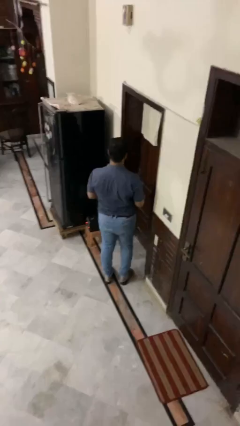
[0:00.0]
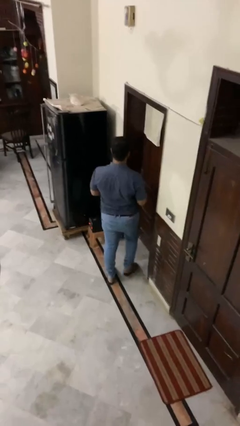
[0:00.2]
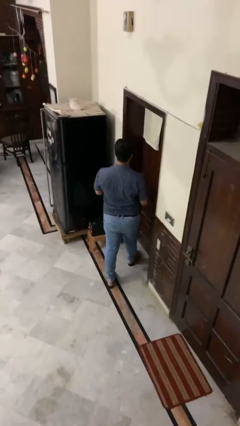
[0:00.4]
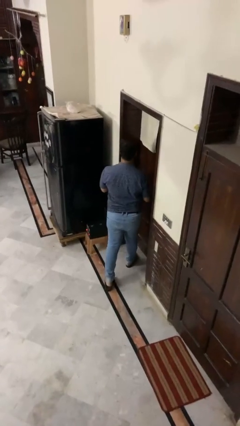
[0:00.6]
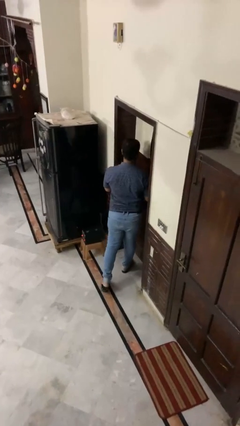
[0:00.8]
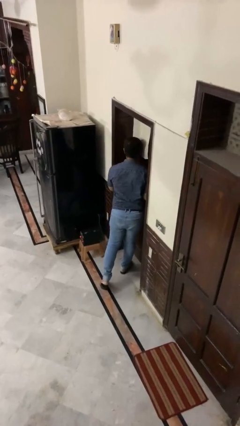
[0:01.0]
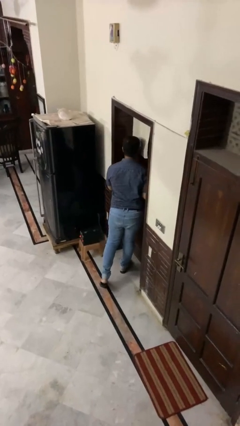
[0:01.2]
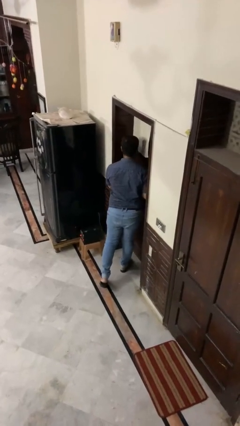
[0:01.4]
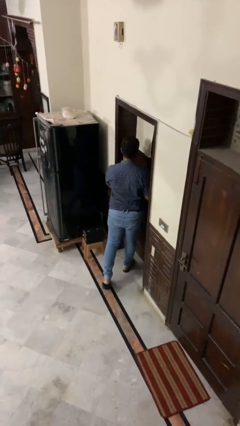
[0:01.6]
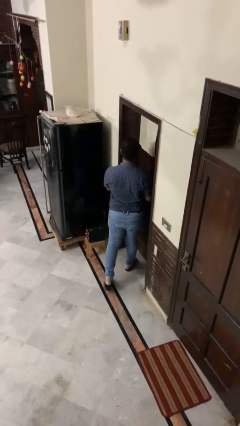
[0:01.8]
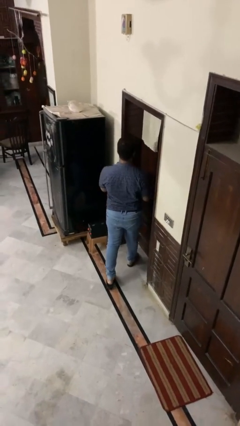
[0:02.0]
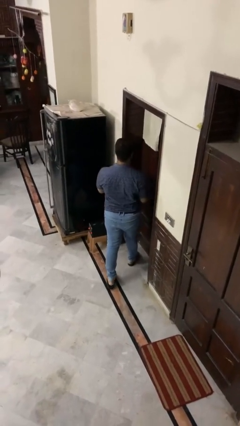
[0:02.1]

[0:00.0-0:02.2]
person bumps into wall

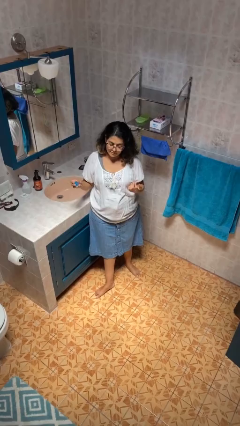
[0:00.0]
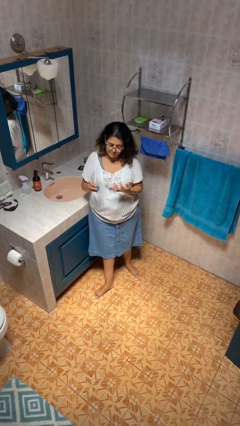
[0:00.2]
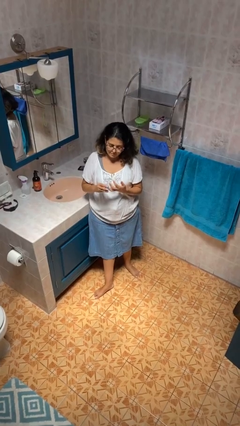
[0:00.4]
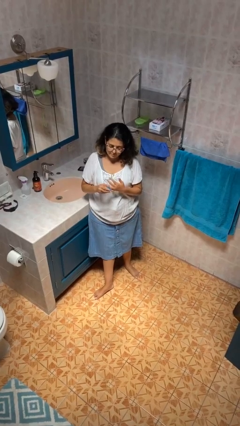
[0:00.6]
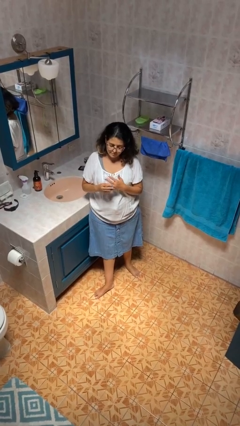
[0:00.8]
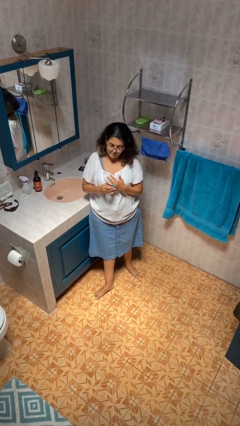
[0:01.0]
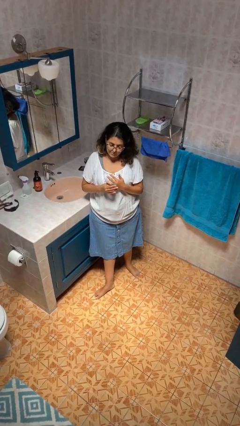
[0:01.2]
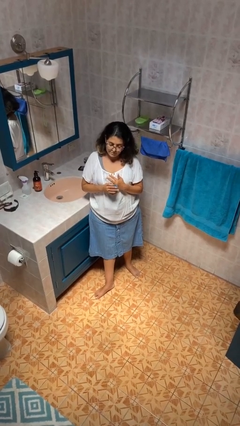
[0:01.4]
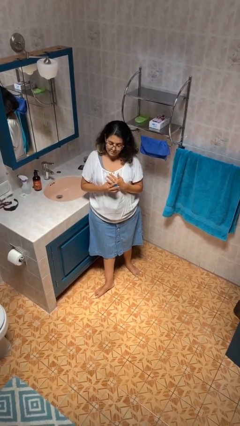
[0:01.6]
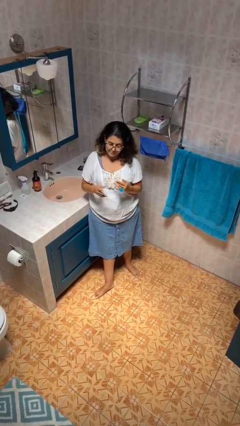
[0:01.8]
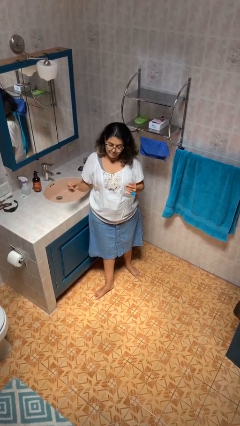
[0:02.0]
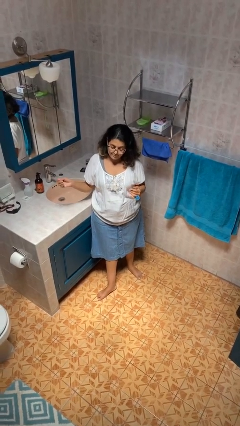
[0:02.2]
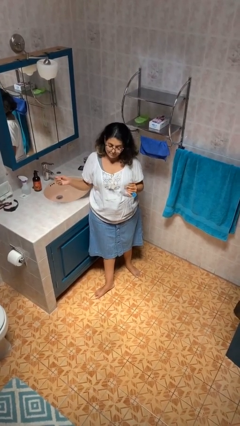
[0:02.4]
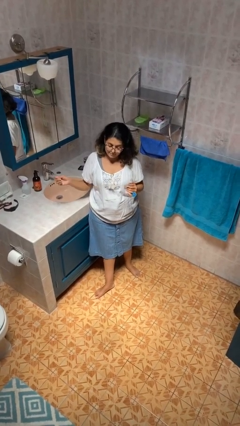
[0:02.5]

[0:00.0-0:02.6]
person puts on ring

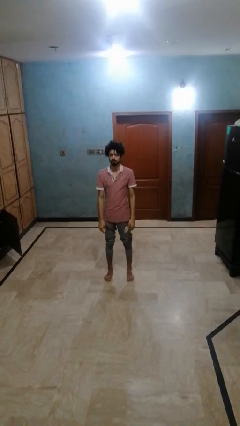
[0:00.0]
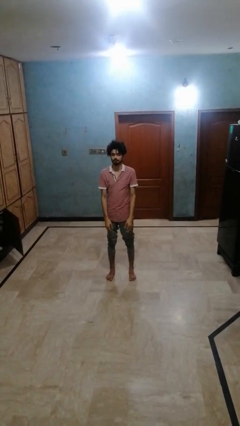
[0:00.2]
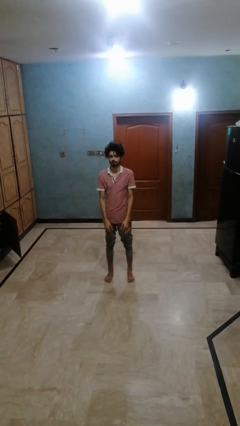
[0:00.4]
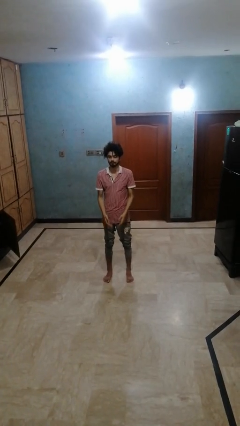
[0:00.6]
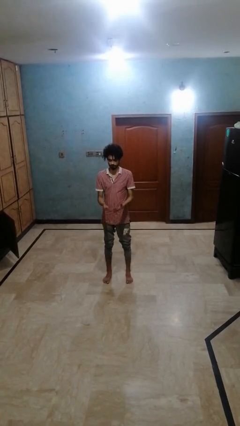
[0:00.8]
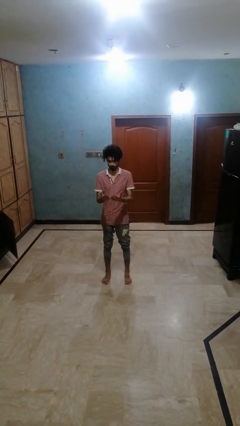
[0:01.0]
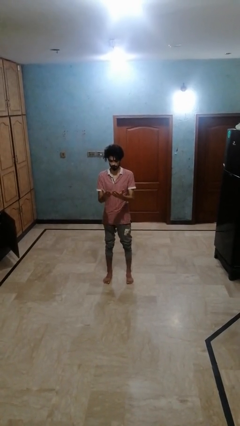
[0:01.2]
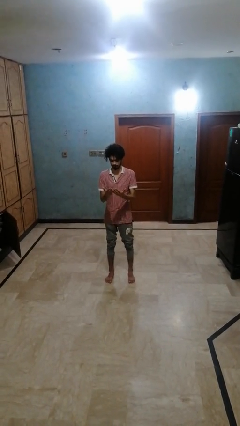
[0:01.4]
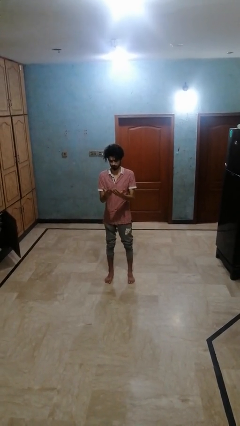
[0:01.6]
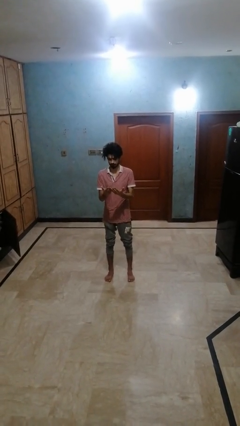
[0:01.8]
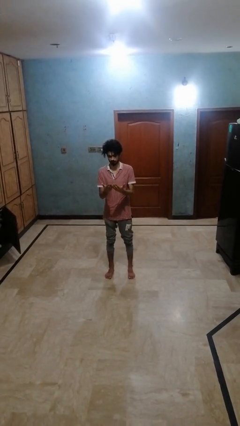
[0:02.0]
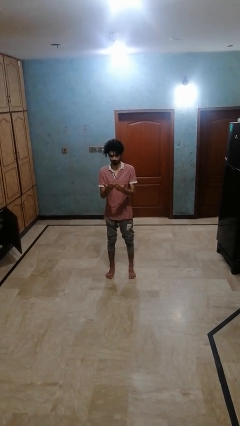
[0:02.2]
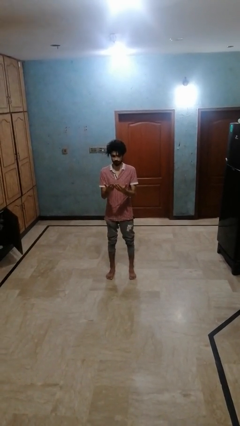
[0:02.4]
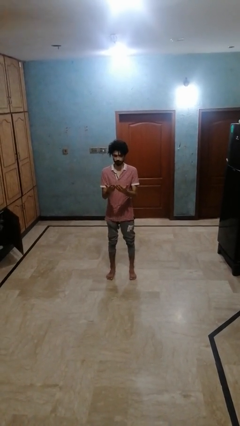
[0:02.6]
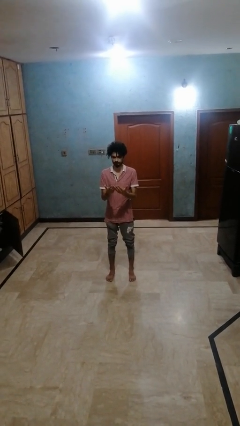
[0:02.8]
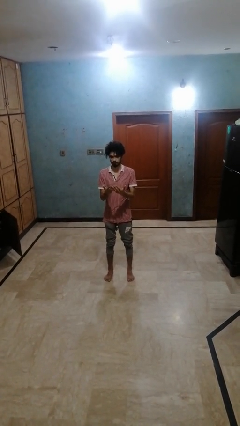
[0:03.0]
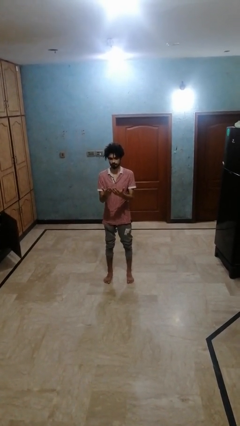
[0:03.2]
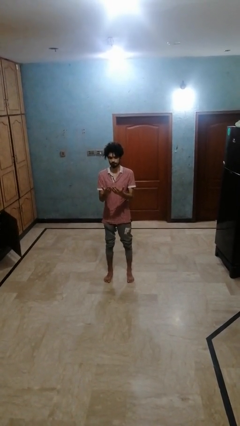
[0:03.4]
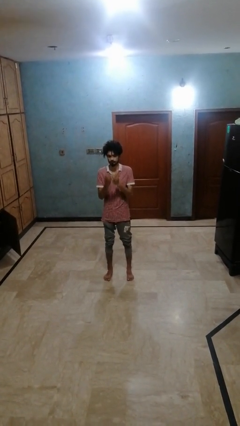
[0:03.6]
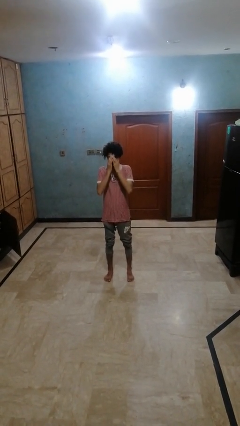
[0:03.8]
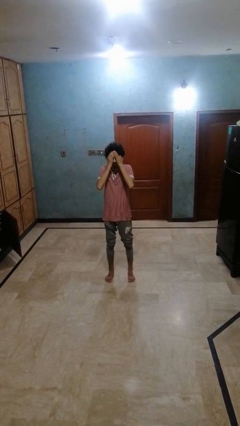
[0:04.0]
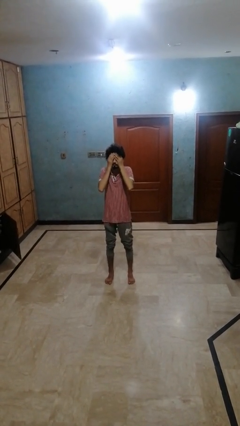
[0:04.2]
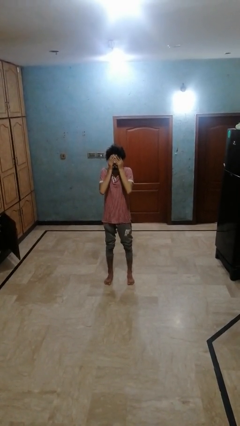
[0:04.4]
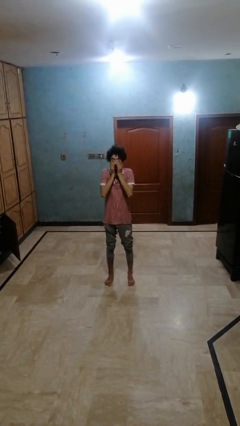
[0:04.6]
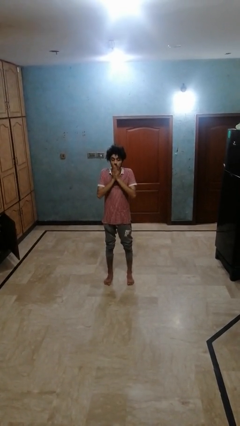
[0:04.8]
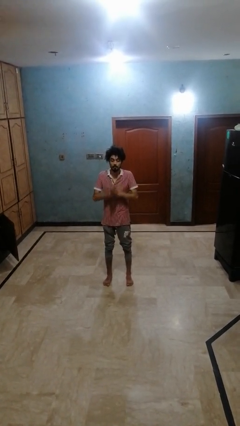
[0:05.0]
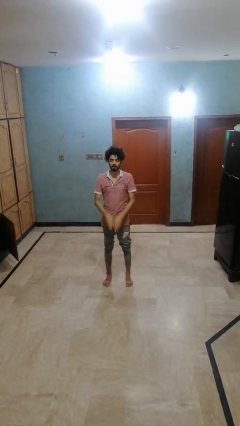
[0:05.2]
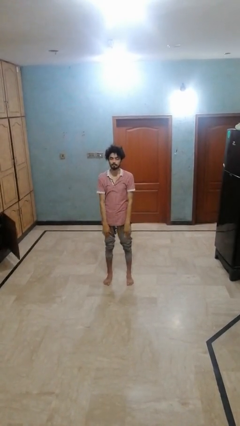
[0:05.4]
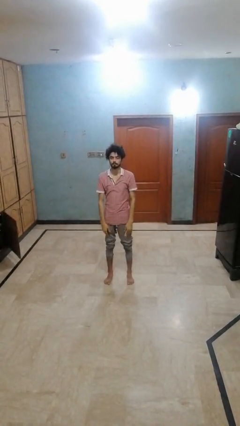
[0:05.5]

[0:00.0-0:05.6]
person prays

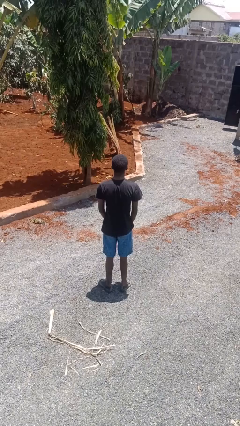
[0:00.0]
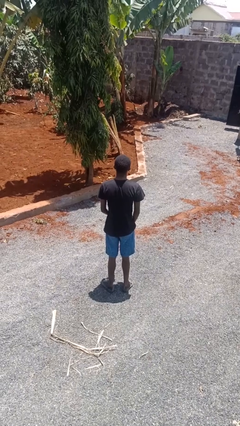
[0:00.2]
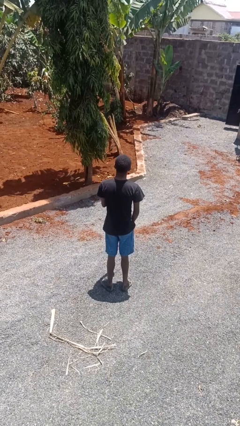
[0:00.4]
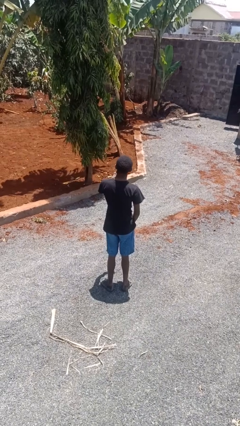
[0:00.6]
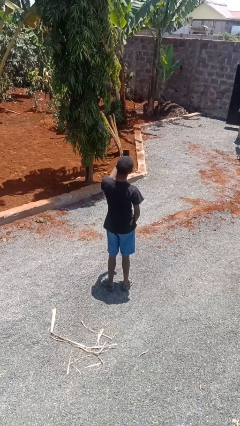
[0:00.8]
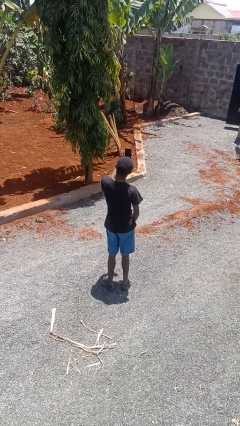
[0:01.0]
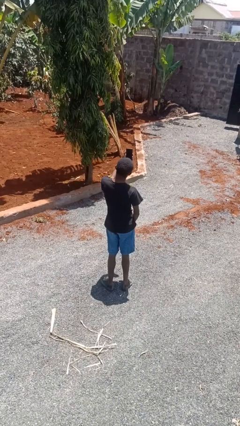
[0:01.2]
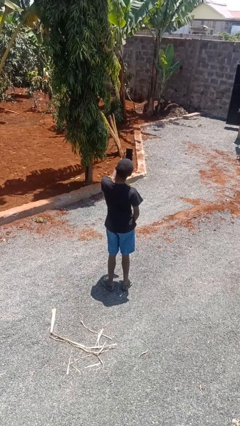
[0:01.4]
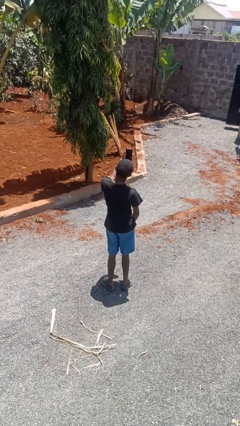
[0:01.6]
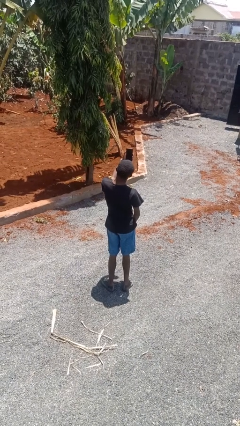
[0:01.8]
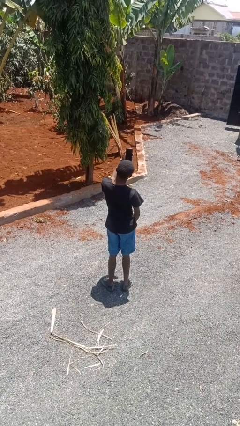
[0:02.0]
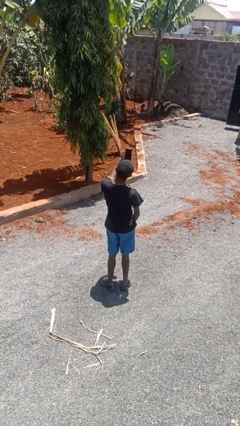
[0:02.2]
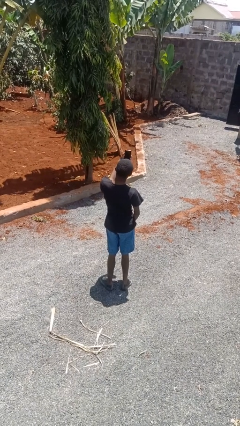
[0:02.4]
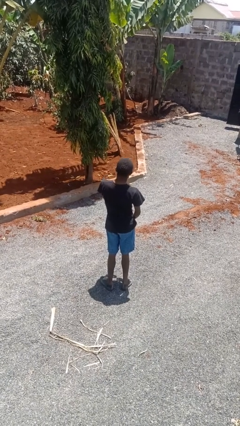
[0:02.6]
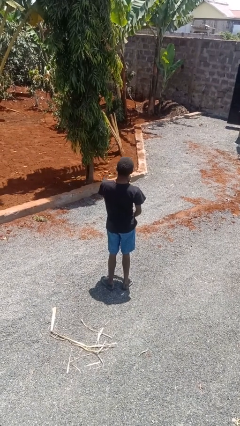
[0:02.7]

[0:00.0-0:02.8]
person takes selfie

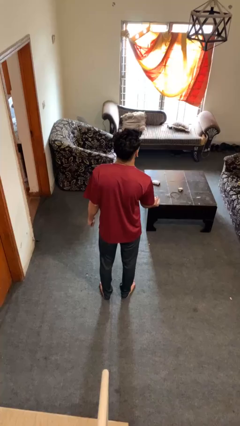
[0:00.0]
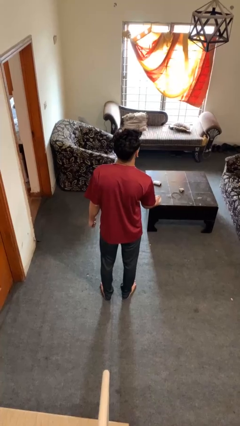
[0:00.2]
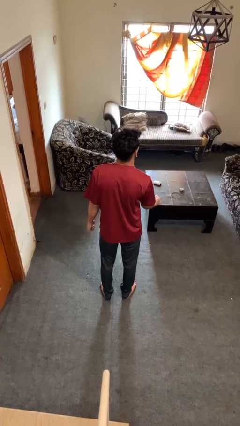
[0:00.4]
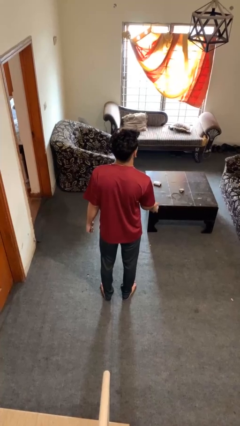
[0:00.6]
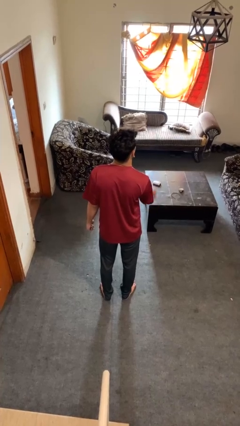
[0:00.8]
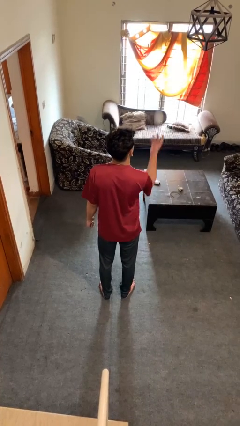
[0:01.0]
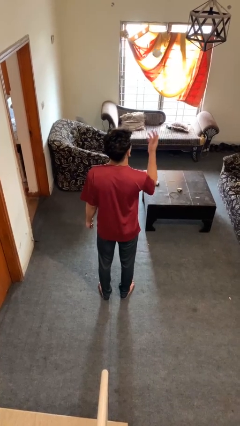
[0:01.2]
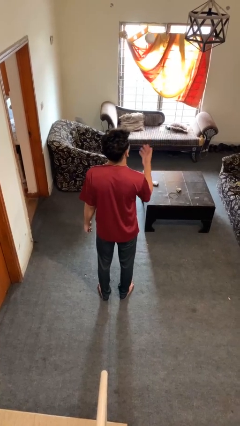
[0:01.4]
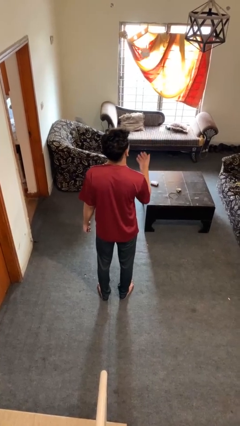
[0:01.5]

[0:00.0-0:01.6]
person drops object

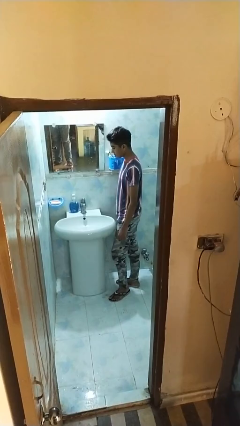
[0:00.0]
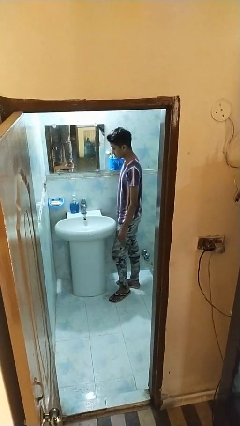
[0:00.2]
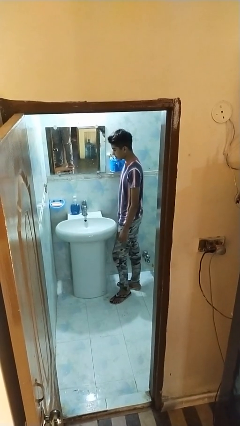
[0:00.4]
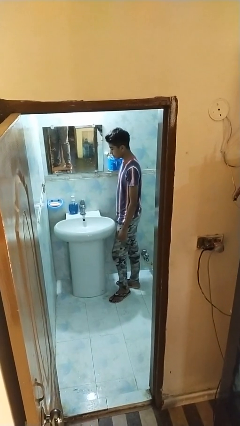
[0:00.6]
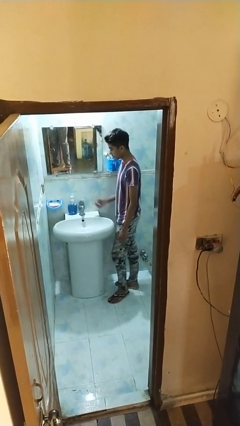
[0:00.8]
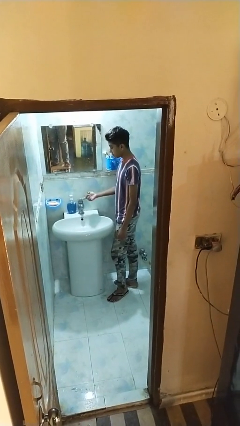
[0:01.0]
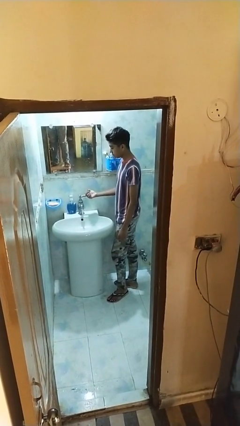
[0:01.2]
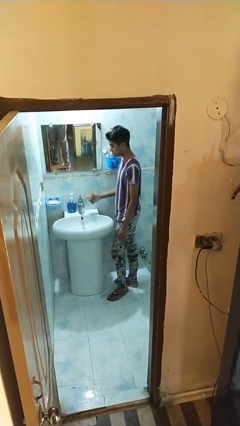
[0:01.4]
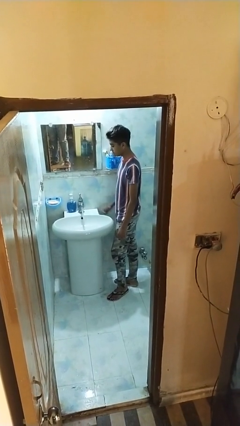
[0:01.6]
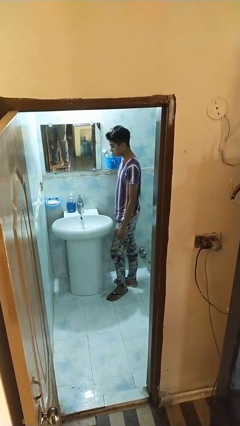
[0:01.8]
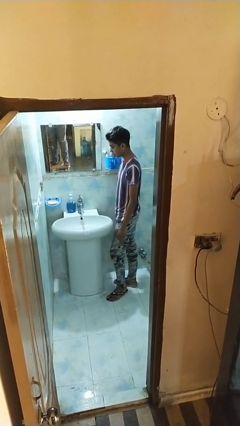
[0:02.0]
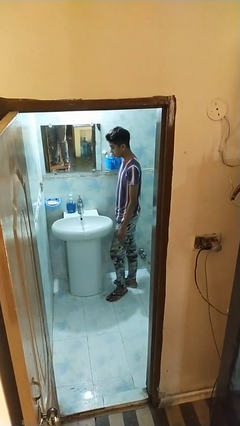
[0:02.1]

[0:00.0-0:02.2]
person turns on faucet

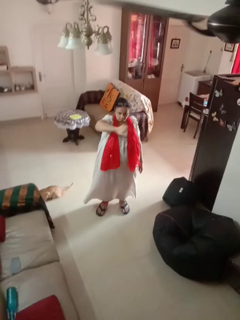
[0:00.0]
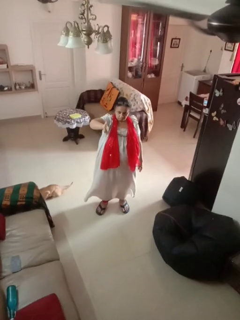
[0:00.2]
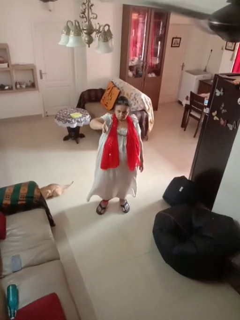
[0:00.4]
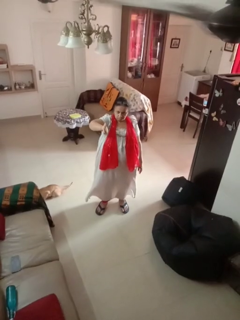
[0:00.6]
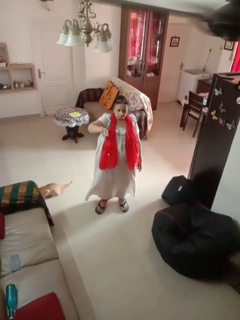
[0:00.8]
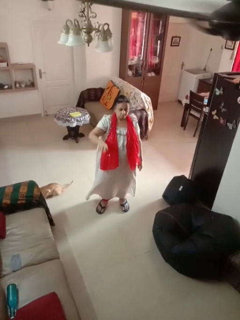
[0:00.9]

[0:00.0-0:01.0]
person gestures swipe right
